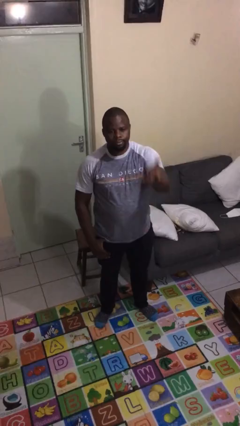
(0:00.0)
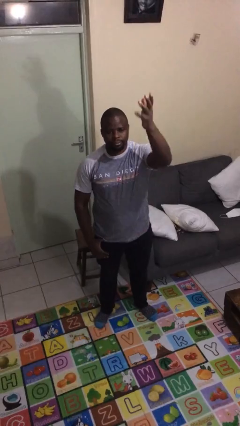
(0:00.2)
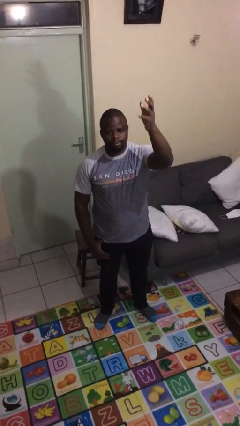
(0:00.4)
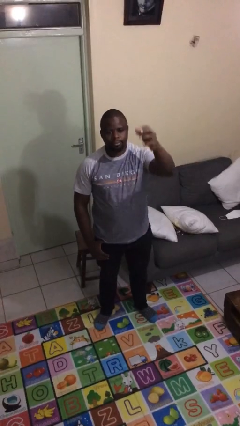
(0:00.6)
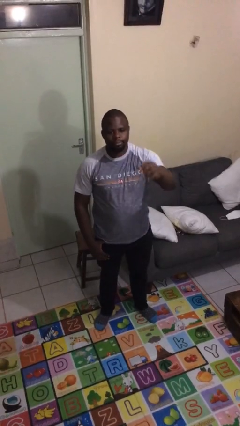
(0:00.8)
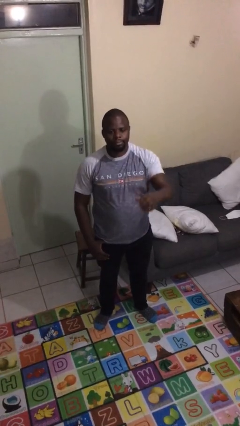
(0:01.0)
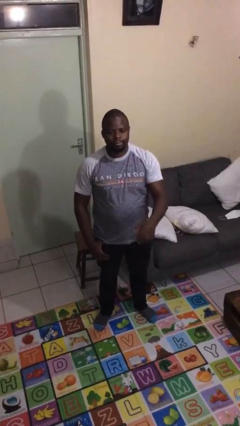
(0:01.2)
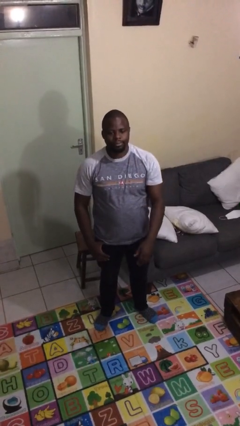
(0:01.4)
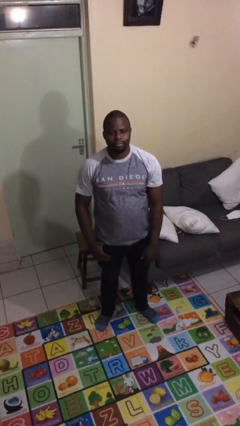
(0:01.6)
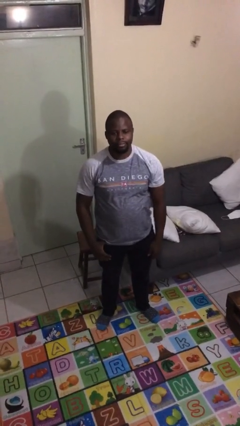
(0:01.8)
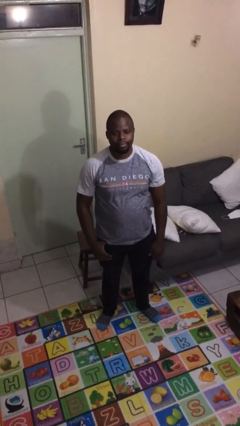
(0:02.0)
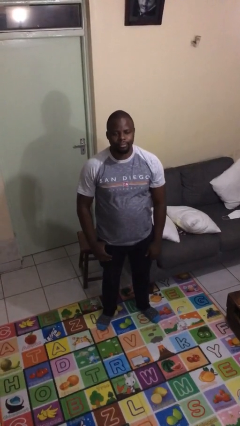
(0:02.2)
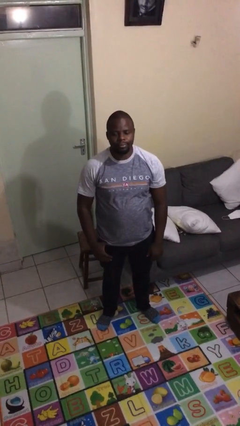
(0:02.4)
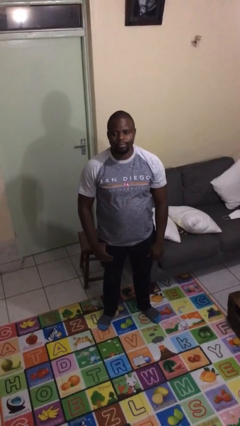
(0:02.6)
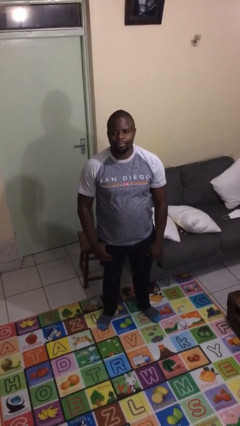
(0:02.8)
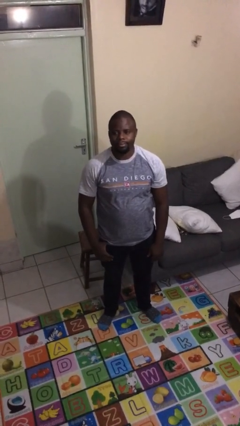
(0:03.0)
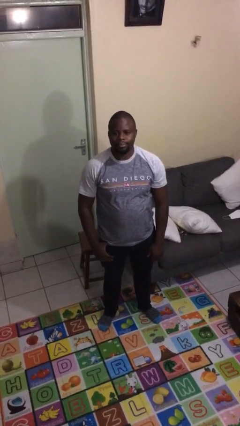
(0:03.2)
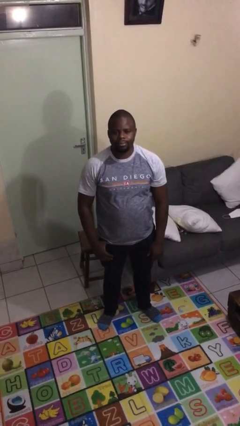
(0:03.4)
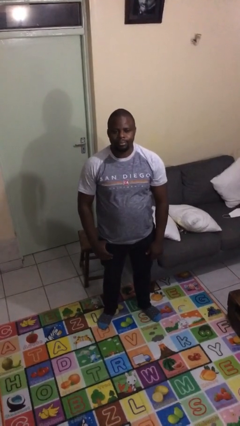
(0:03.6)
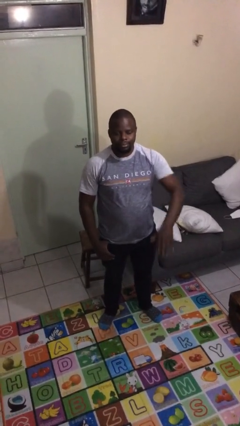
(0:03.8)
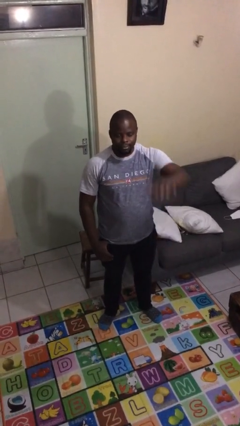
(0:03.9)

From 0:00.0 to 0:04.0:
person gestures swipe up

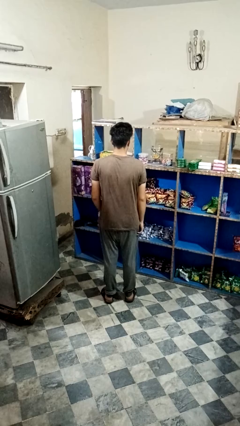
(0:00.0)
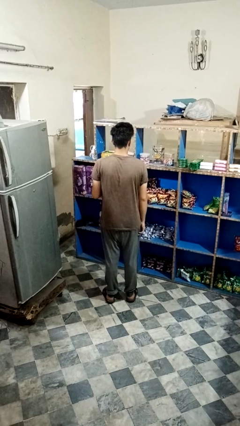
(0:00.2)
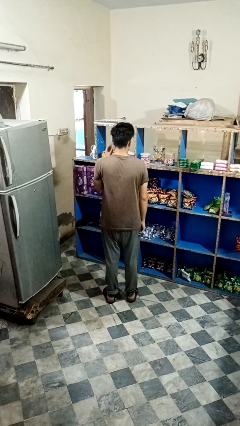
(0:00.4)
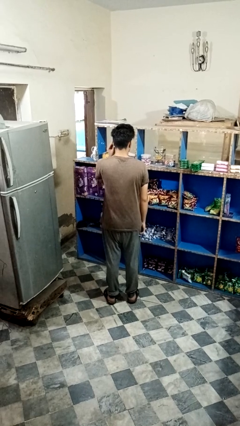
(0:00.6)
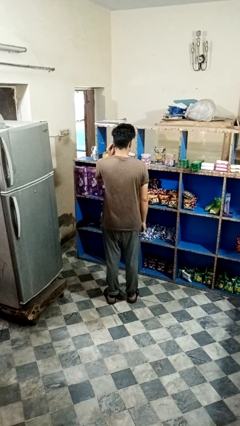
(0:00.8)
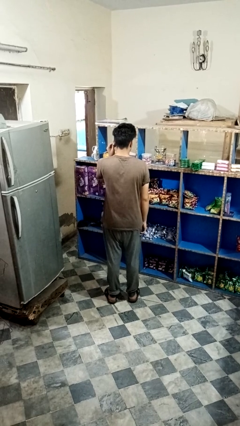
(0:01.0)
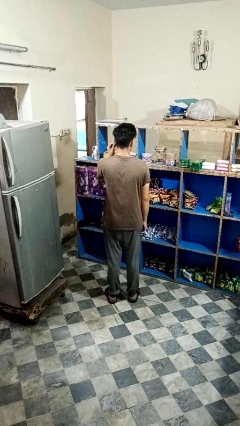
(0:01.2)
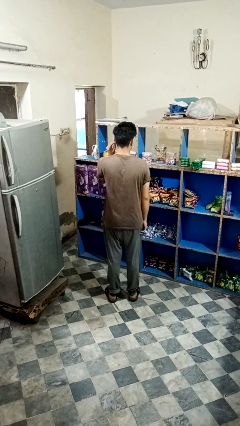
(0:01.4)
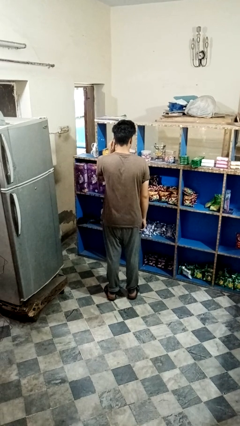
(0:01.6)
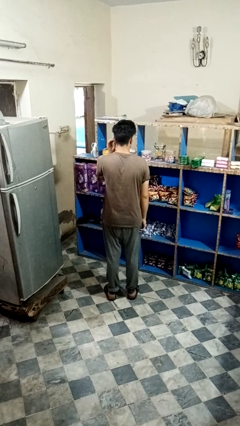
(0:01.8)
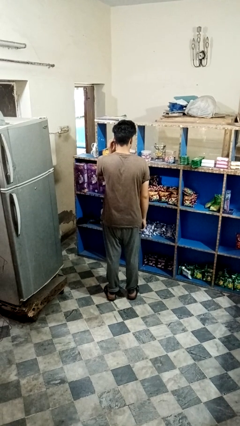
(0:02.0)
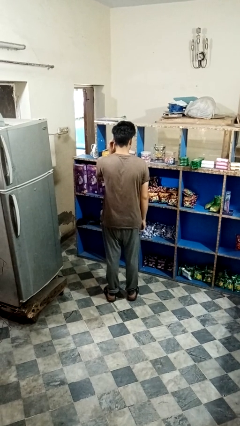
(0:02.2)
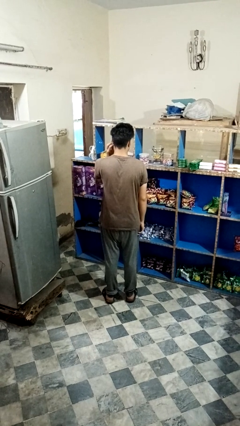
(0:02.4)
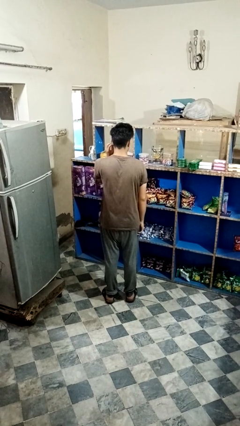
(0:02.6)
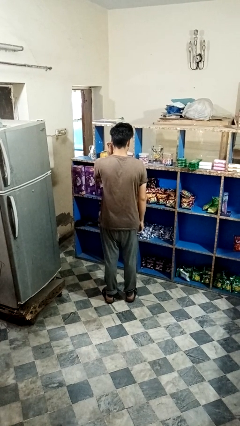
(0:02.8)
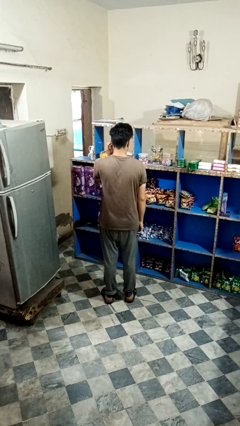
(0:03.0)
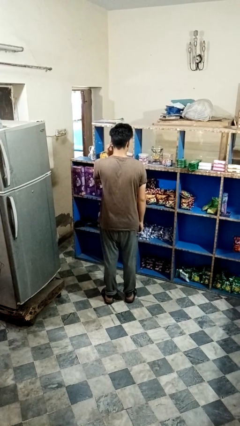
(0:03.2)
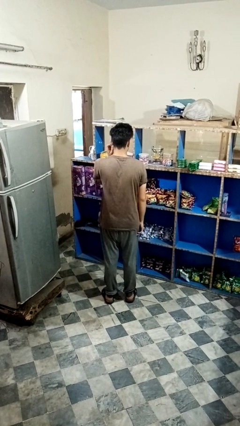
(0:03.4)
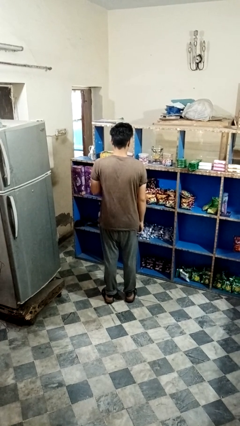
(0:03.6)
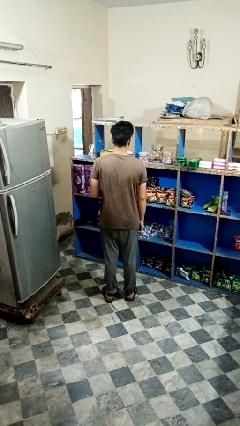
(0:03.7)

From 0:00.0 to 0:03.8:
person touches earlobe

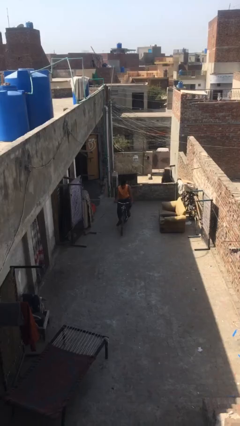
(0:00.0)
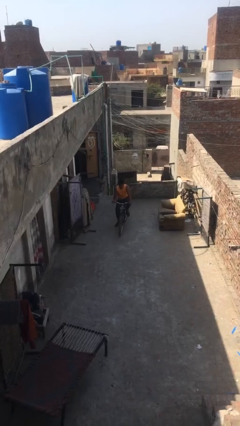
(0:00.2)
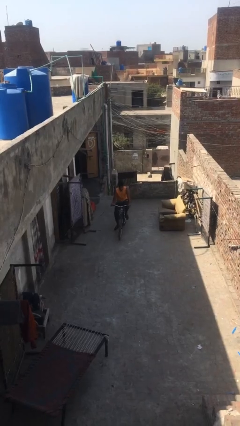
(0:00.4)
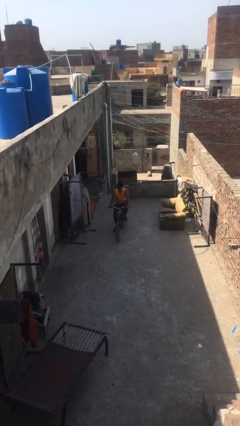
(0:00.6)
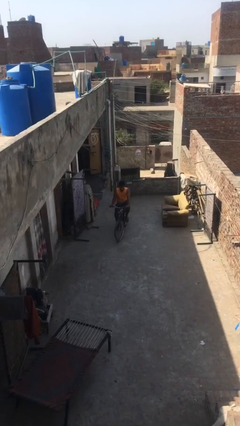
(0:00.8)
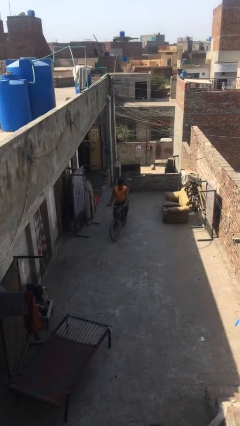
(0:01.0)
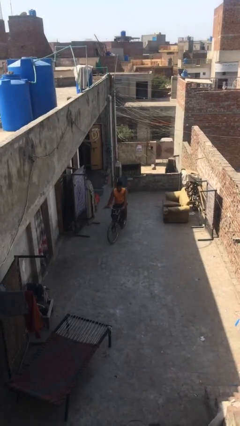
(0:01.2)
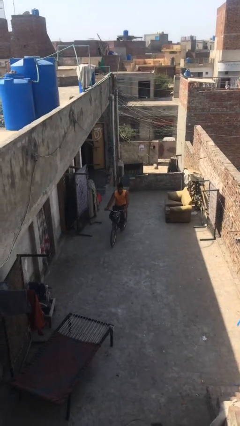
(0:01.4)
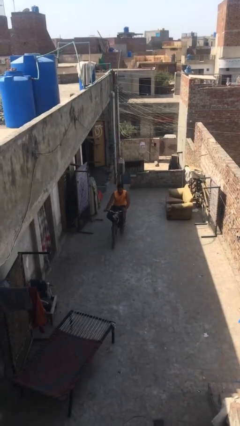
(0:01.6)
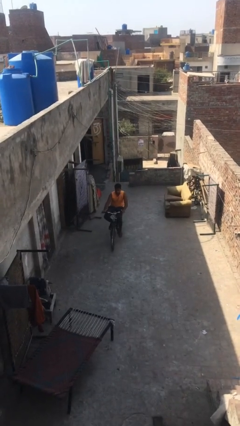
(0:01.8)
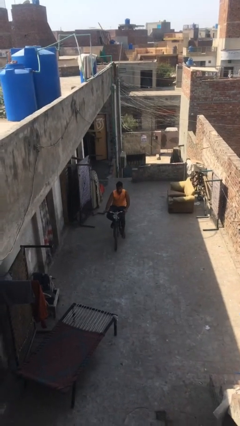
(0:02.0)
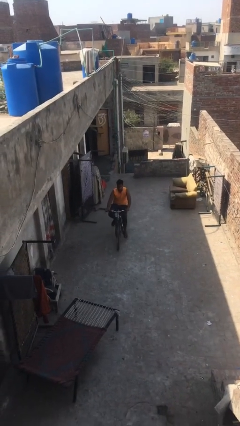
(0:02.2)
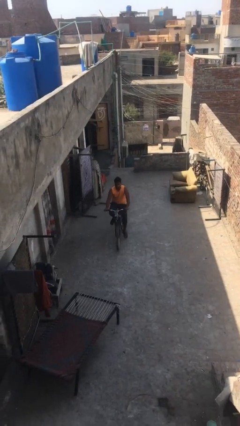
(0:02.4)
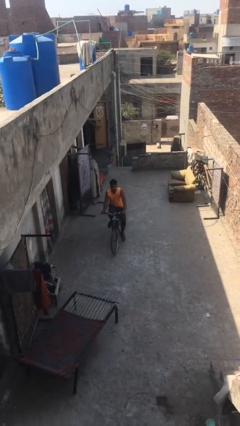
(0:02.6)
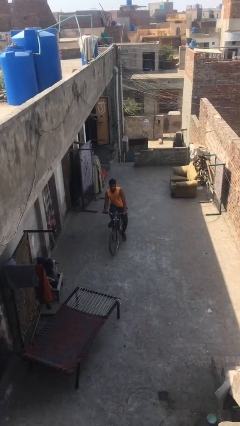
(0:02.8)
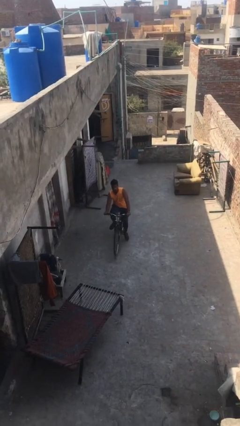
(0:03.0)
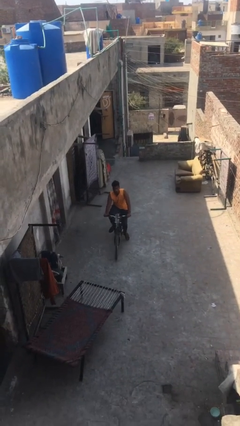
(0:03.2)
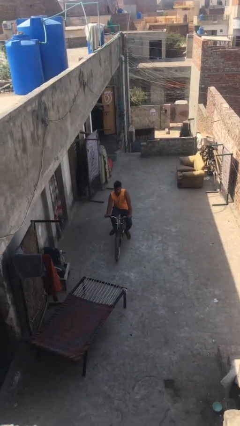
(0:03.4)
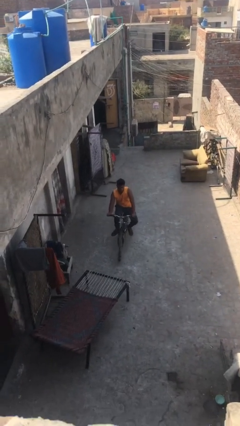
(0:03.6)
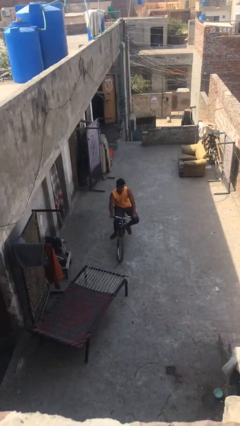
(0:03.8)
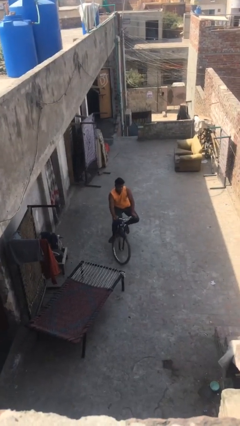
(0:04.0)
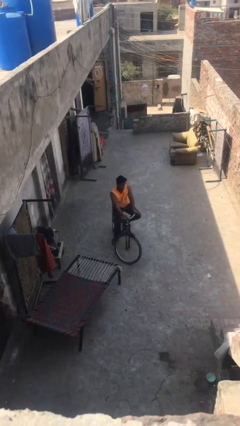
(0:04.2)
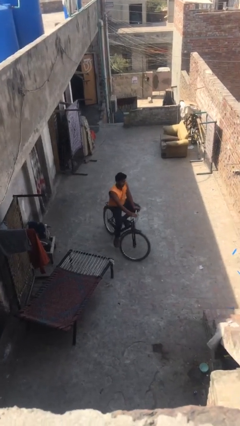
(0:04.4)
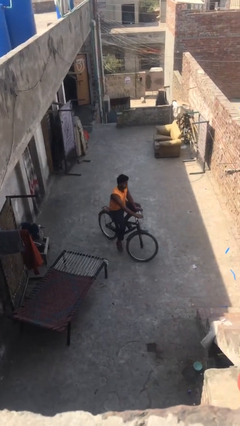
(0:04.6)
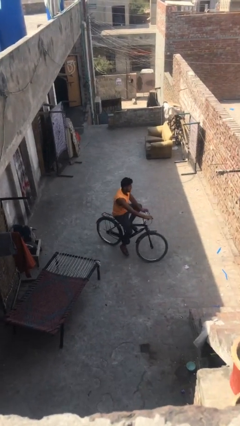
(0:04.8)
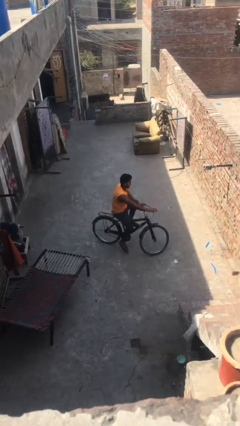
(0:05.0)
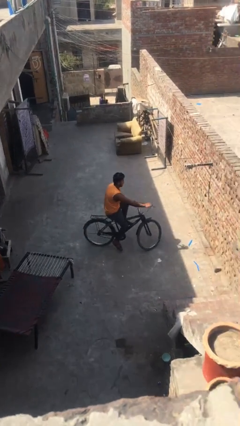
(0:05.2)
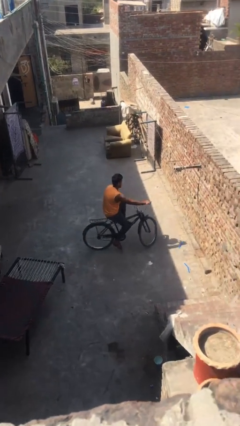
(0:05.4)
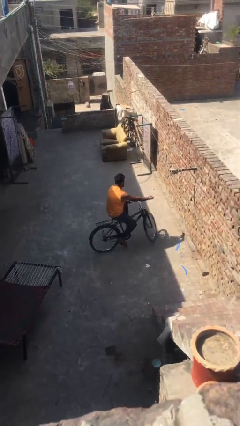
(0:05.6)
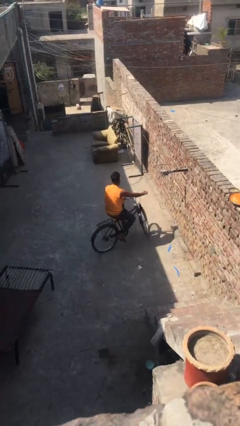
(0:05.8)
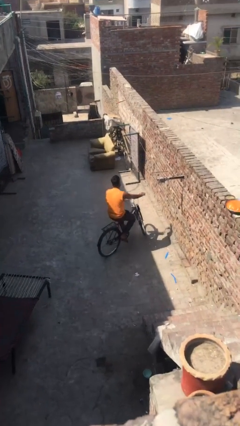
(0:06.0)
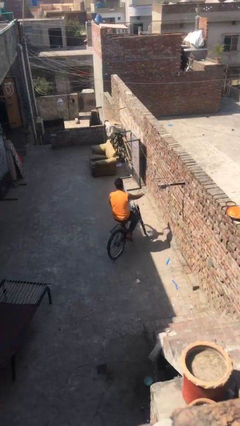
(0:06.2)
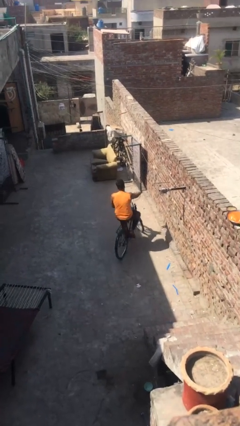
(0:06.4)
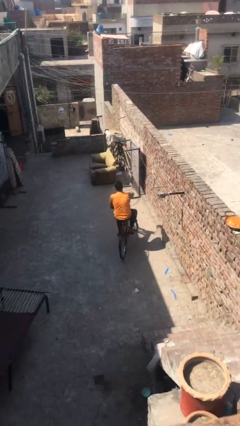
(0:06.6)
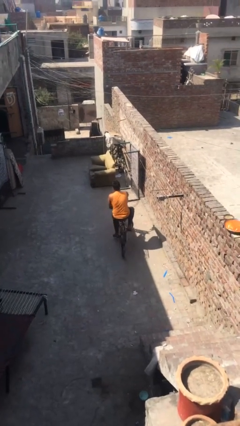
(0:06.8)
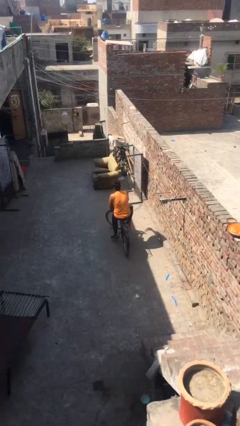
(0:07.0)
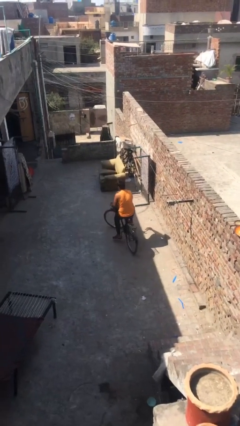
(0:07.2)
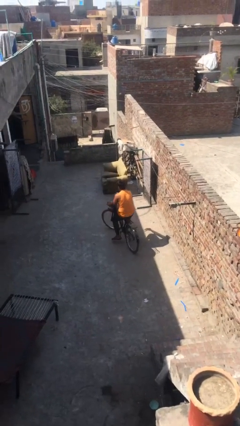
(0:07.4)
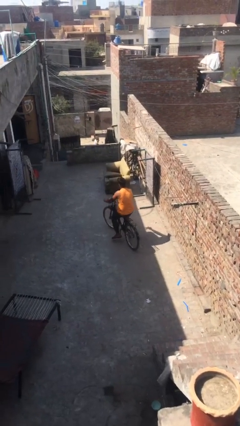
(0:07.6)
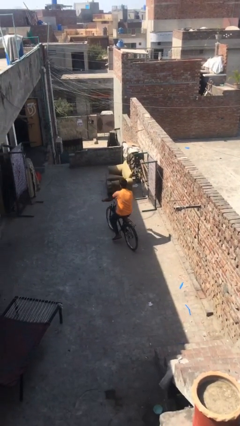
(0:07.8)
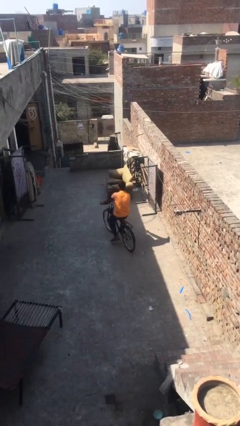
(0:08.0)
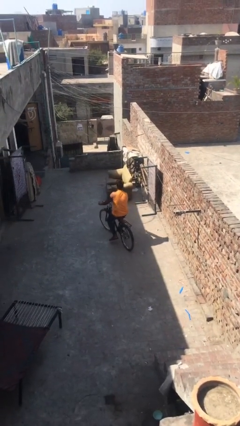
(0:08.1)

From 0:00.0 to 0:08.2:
person rides bicycle

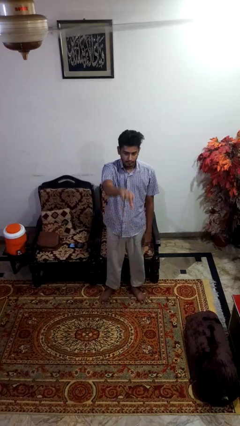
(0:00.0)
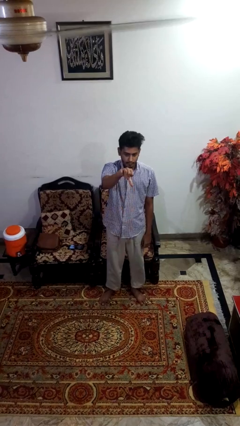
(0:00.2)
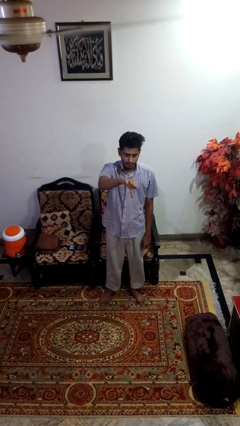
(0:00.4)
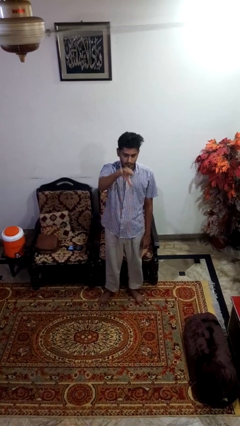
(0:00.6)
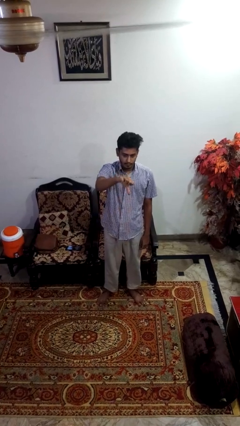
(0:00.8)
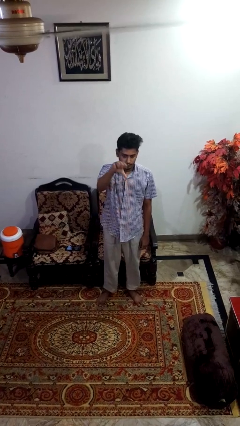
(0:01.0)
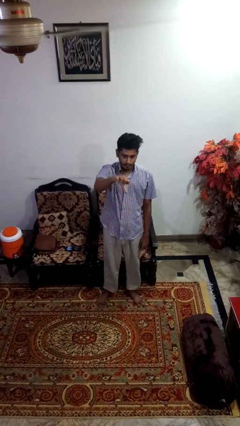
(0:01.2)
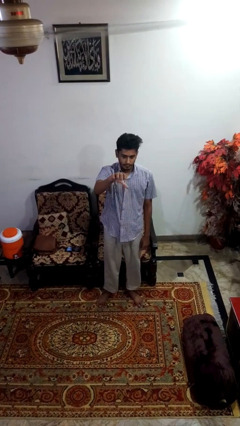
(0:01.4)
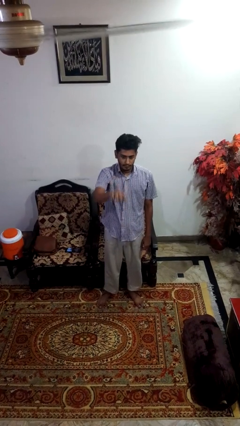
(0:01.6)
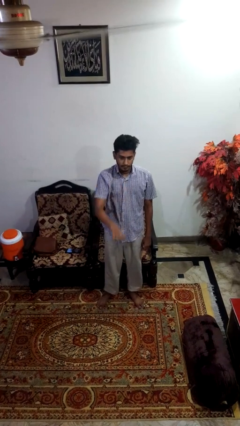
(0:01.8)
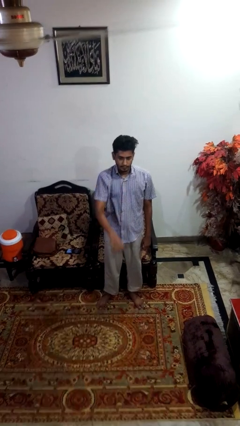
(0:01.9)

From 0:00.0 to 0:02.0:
person gestures thumbs down
